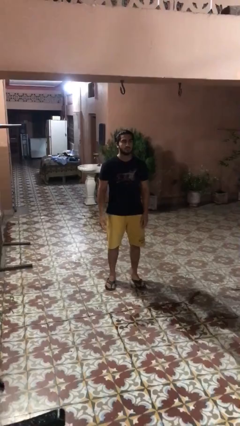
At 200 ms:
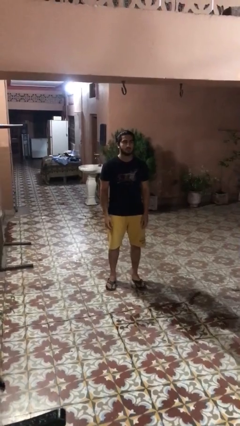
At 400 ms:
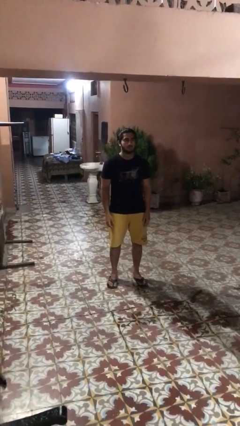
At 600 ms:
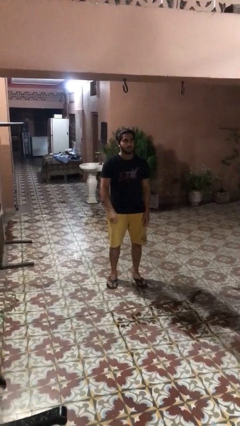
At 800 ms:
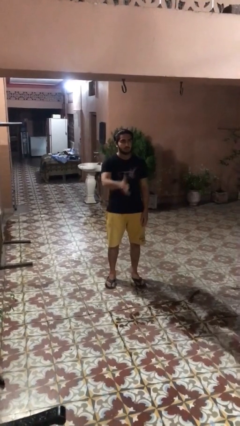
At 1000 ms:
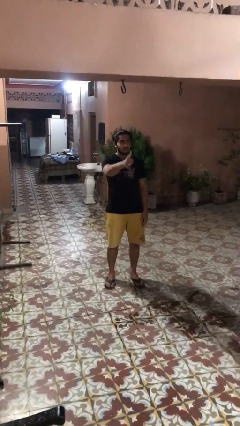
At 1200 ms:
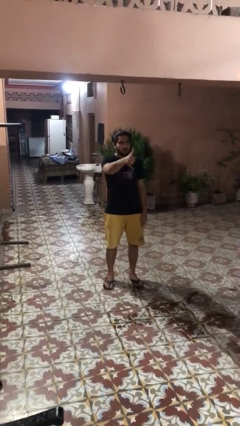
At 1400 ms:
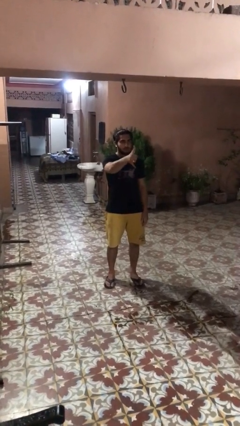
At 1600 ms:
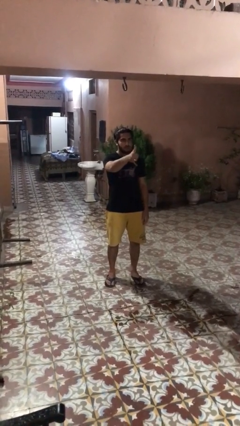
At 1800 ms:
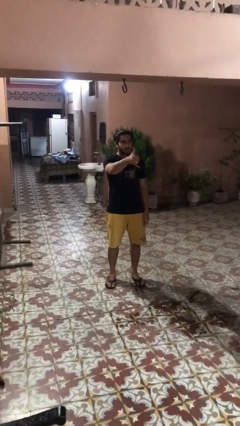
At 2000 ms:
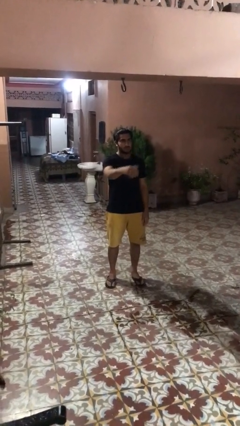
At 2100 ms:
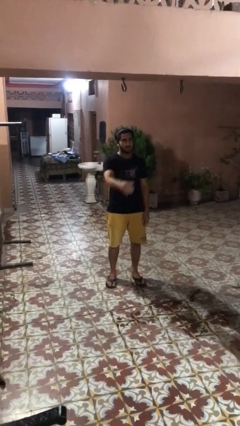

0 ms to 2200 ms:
person gestures hang loose

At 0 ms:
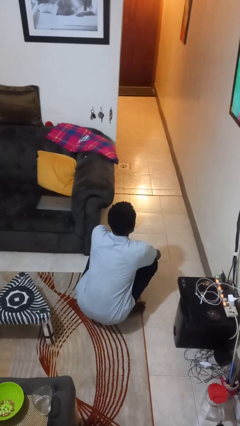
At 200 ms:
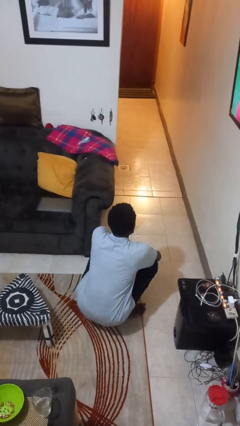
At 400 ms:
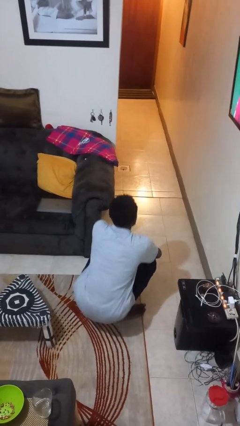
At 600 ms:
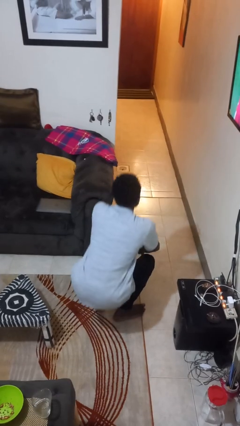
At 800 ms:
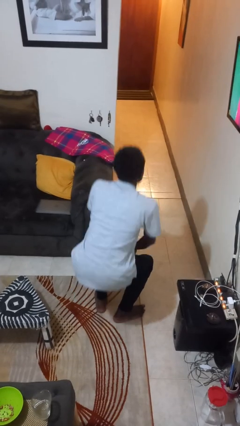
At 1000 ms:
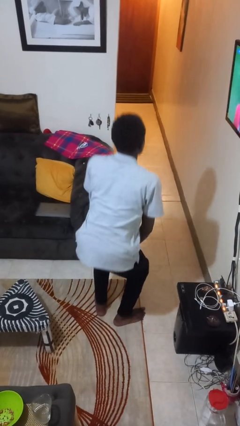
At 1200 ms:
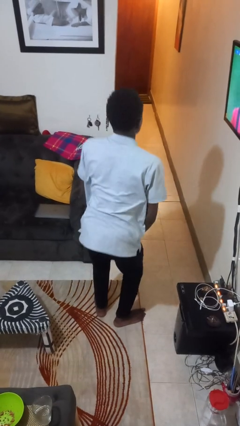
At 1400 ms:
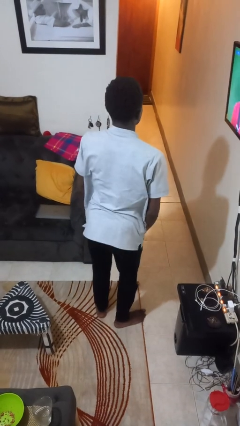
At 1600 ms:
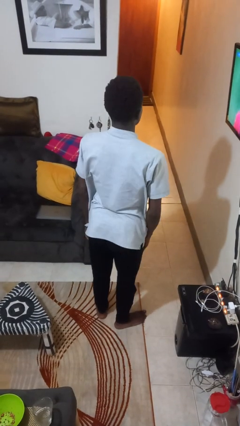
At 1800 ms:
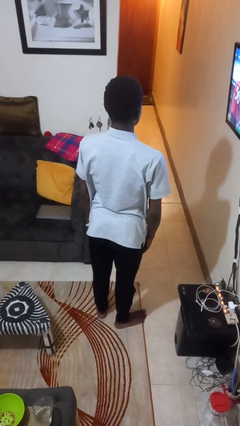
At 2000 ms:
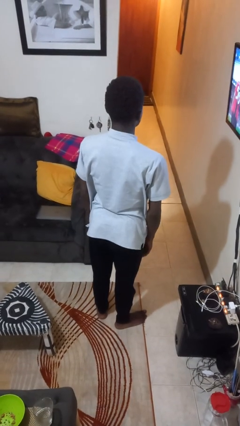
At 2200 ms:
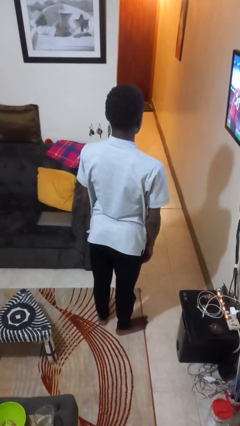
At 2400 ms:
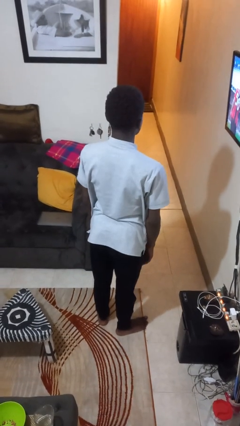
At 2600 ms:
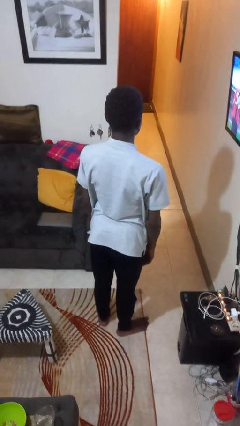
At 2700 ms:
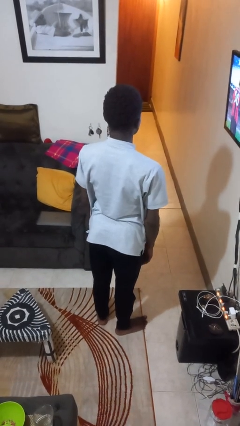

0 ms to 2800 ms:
person stands up

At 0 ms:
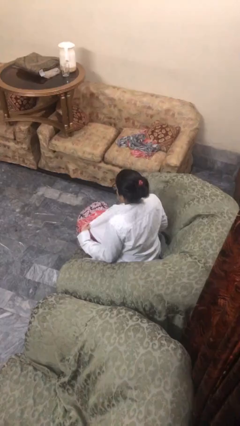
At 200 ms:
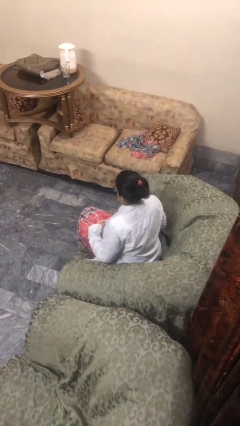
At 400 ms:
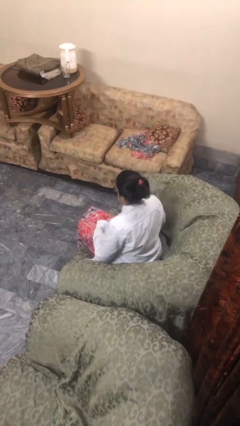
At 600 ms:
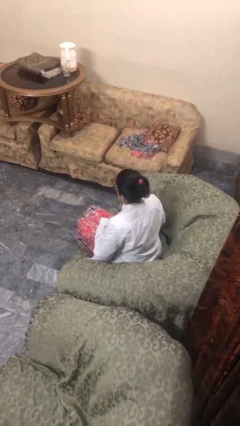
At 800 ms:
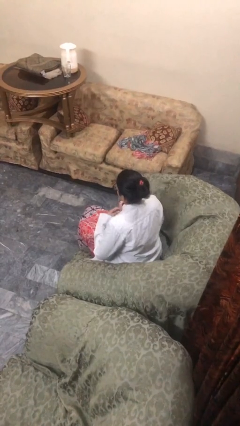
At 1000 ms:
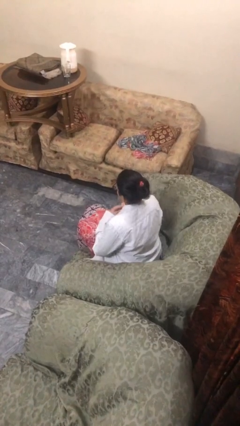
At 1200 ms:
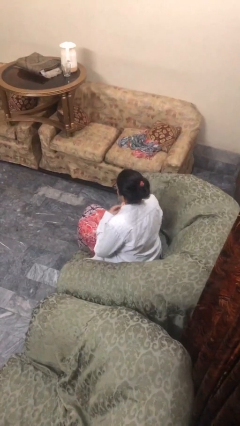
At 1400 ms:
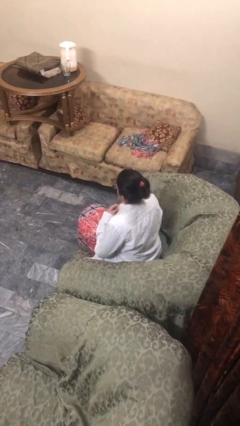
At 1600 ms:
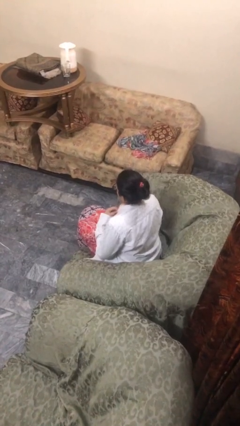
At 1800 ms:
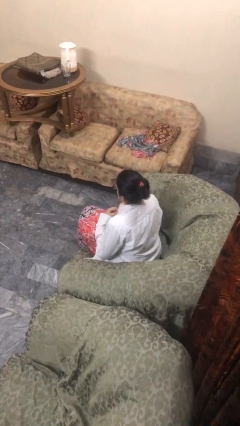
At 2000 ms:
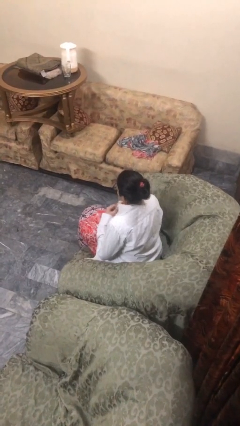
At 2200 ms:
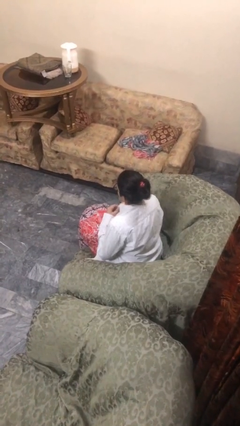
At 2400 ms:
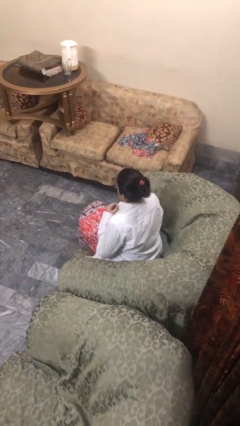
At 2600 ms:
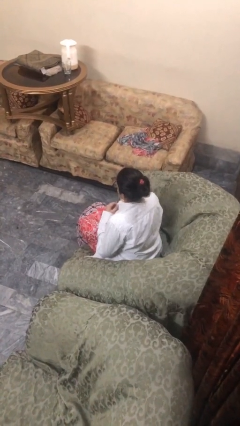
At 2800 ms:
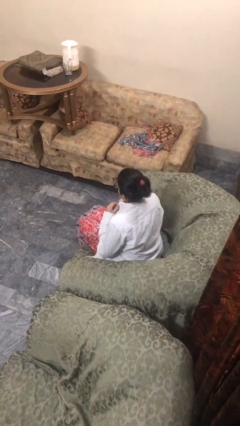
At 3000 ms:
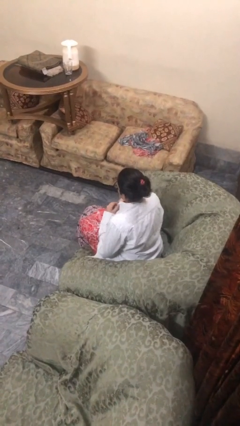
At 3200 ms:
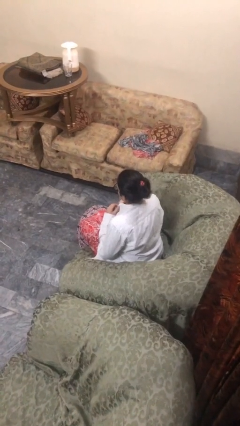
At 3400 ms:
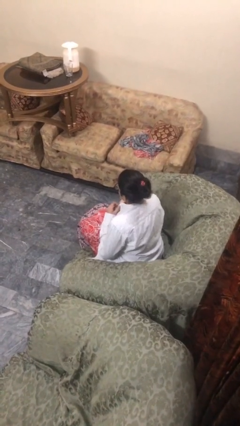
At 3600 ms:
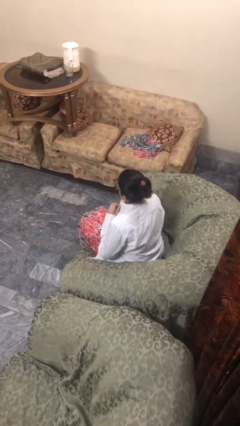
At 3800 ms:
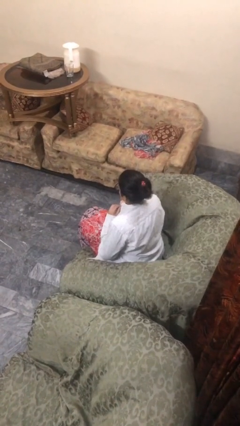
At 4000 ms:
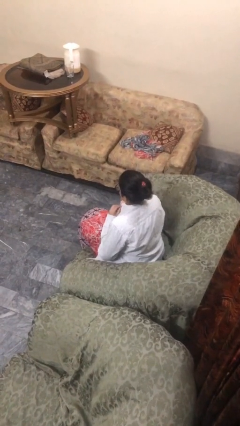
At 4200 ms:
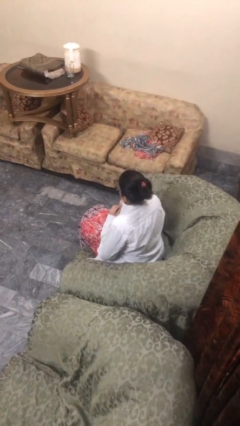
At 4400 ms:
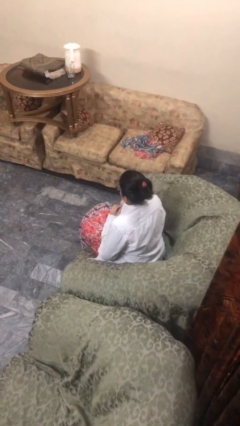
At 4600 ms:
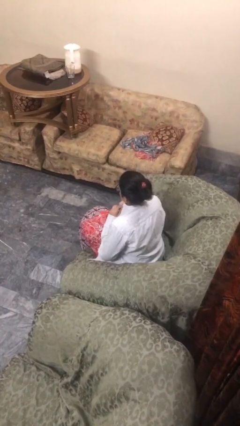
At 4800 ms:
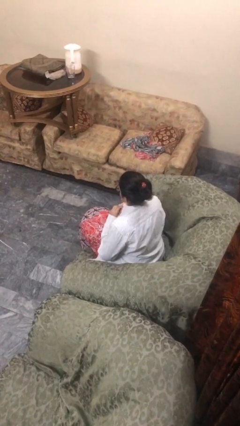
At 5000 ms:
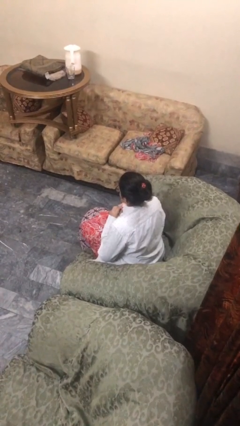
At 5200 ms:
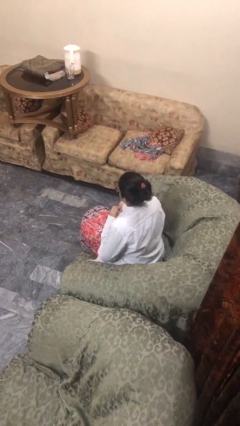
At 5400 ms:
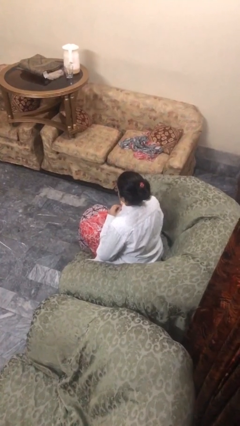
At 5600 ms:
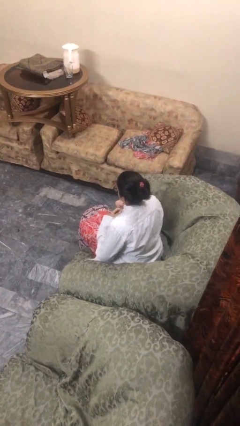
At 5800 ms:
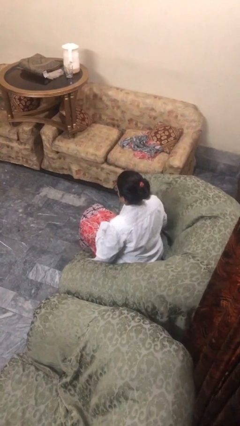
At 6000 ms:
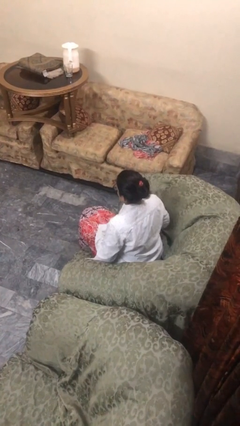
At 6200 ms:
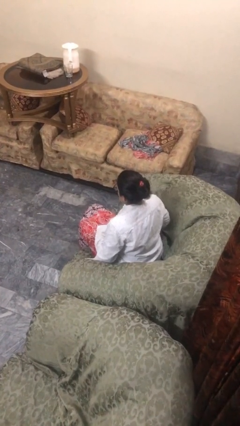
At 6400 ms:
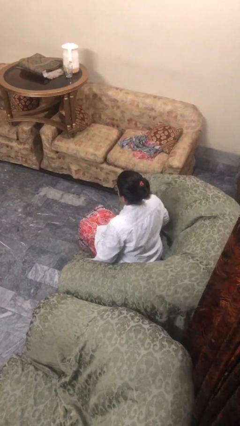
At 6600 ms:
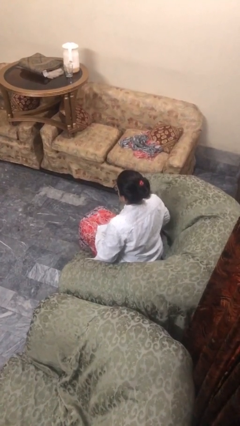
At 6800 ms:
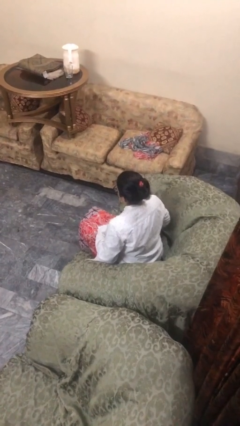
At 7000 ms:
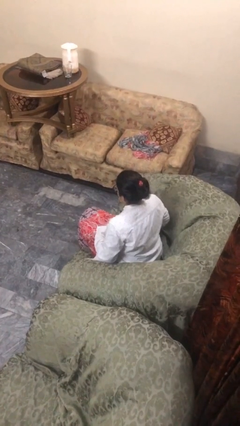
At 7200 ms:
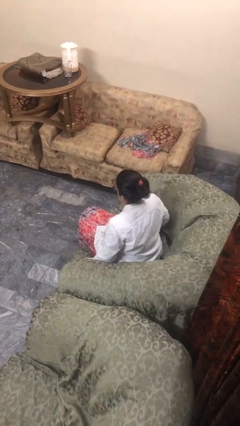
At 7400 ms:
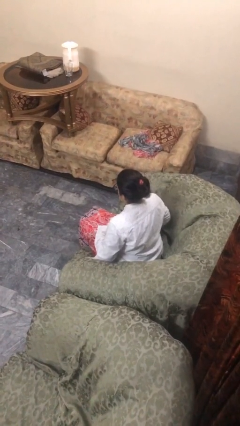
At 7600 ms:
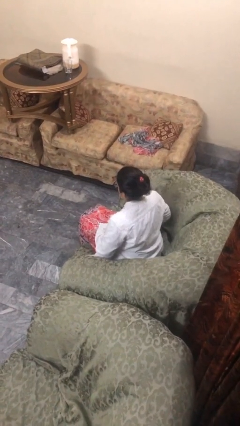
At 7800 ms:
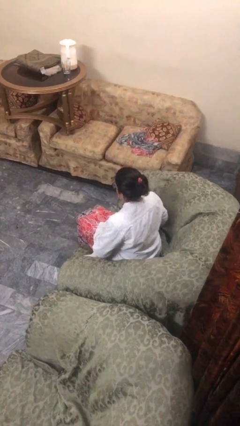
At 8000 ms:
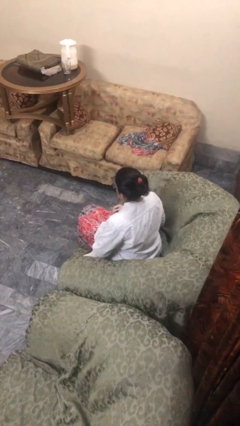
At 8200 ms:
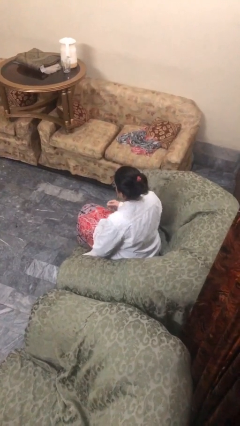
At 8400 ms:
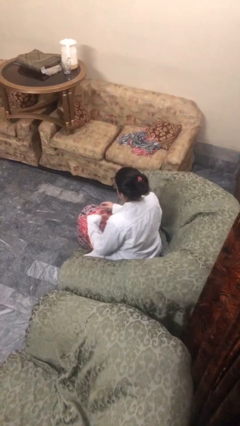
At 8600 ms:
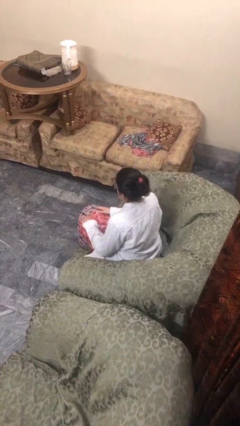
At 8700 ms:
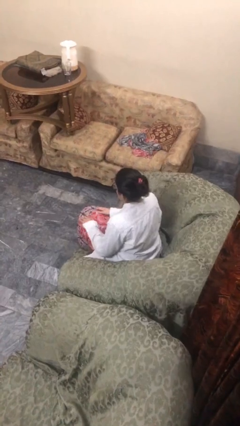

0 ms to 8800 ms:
person buttons shirt

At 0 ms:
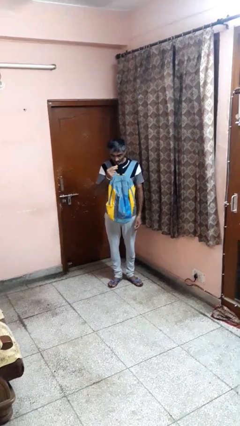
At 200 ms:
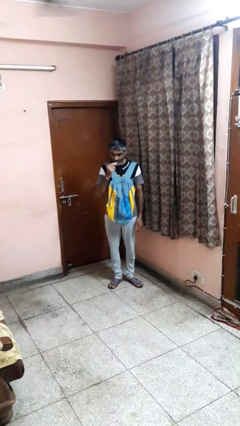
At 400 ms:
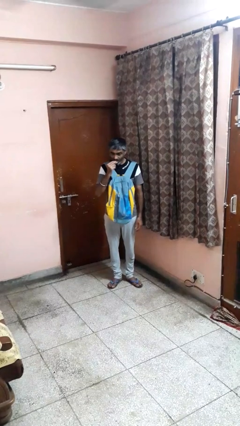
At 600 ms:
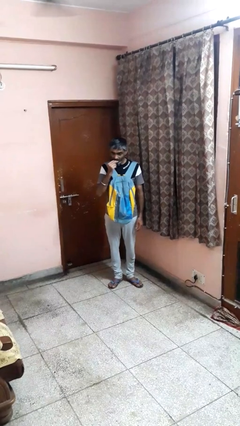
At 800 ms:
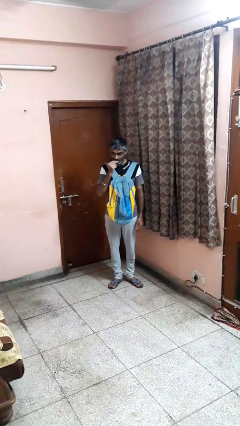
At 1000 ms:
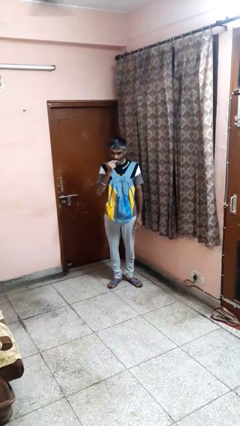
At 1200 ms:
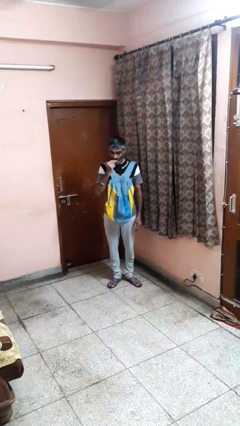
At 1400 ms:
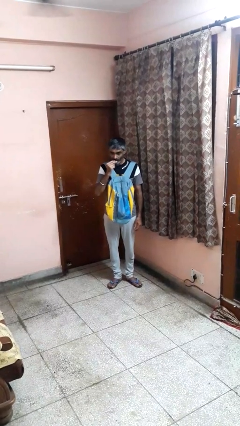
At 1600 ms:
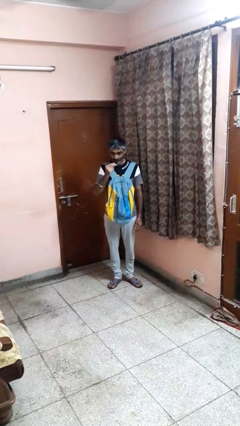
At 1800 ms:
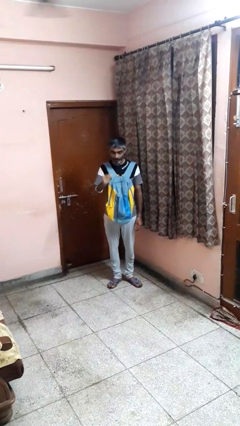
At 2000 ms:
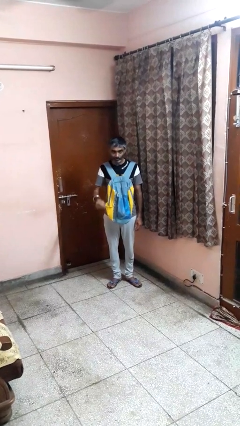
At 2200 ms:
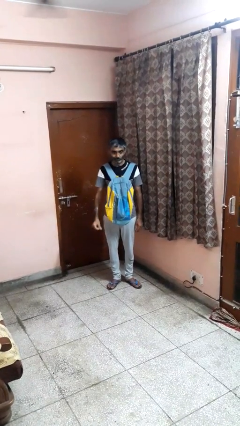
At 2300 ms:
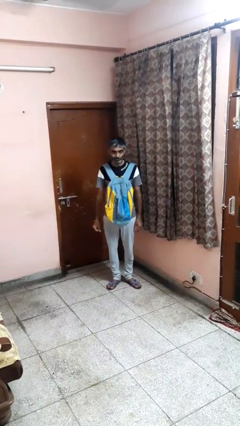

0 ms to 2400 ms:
person eats snack from bag

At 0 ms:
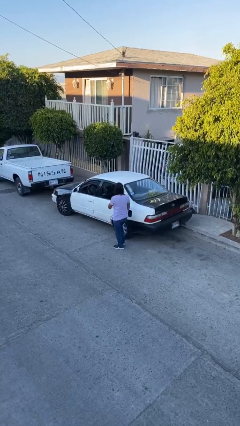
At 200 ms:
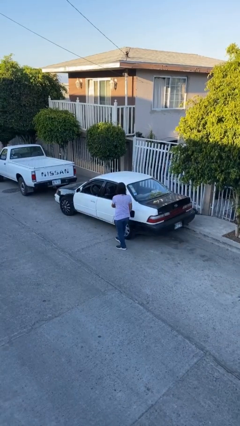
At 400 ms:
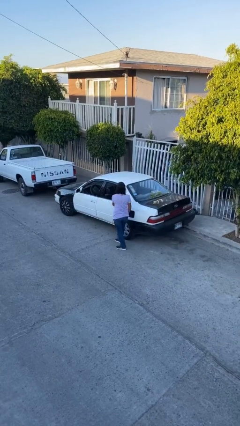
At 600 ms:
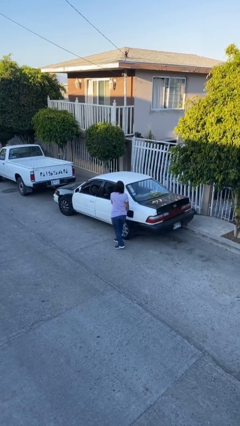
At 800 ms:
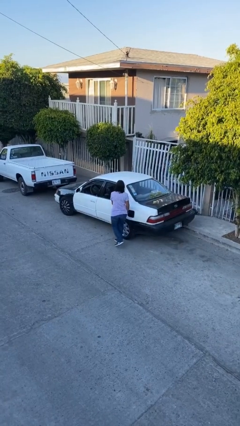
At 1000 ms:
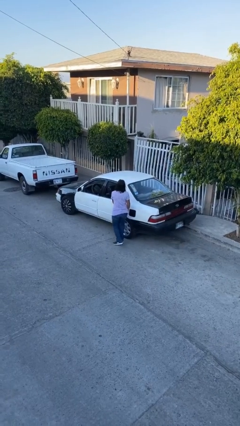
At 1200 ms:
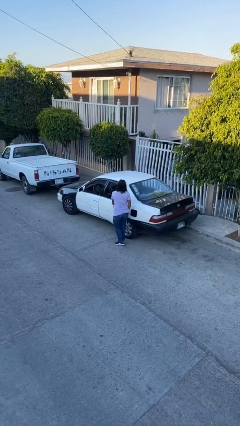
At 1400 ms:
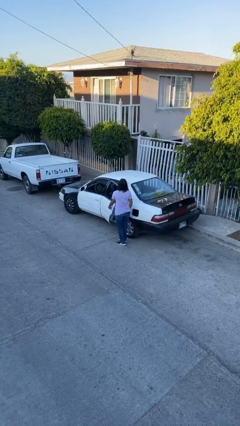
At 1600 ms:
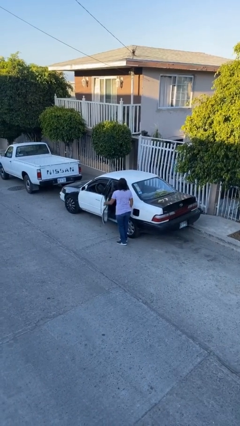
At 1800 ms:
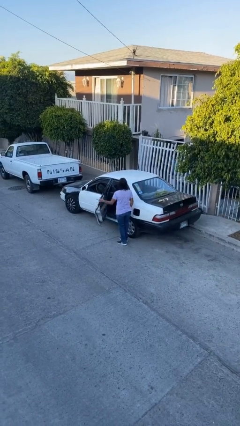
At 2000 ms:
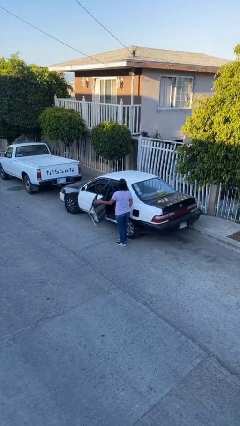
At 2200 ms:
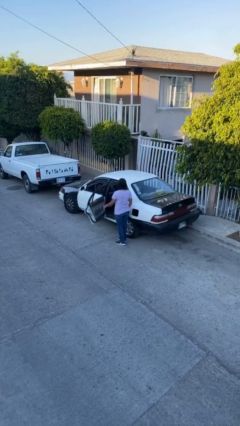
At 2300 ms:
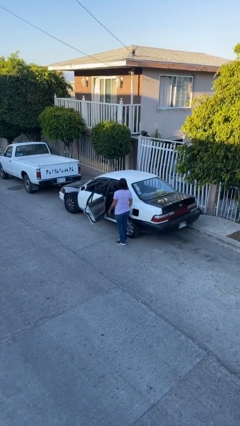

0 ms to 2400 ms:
person opens car door
